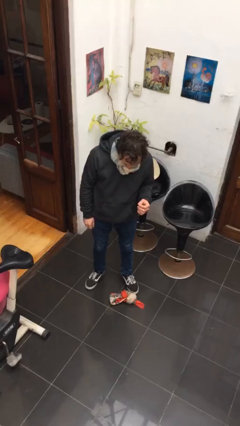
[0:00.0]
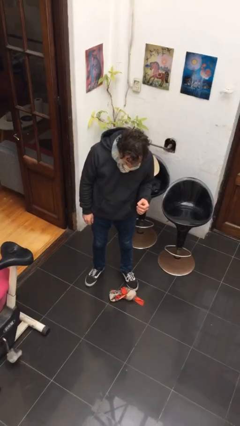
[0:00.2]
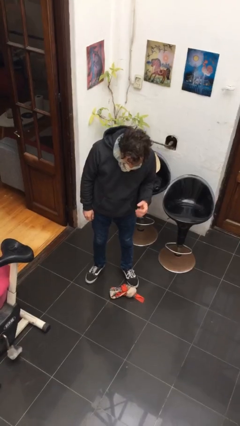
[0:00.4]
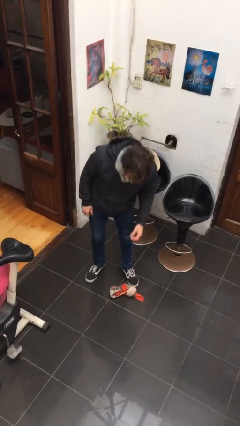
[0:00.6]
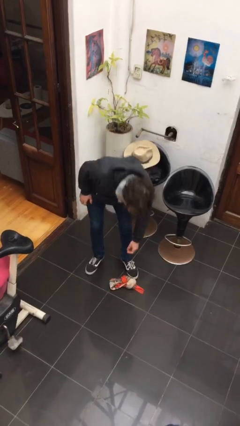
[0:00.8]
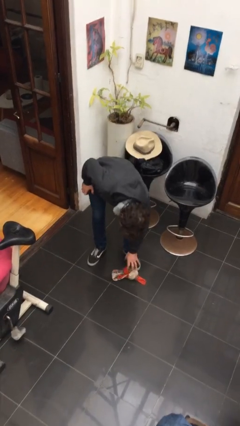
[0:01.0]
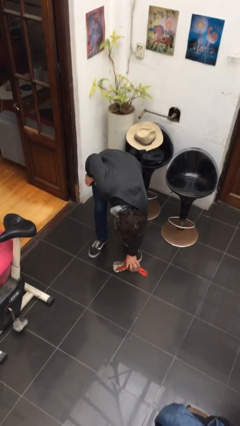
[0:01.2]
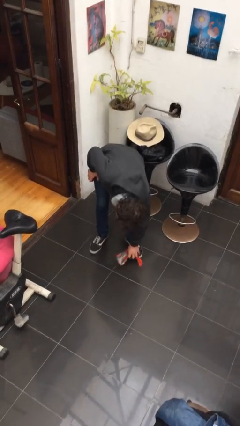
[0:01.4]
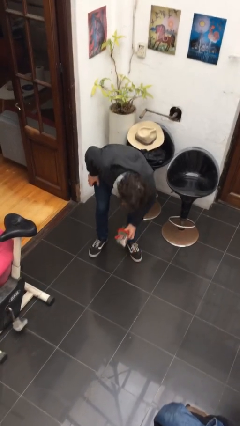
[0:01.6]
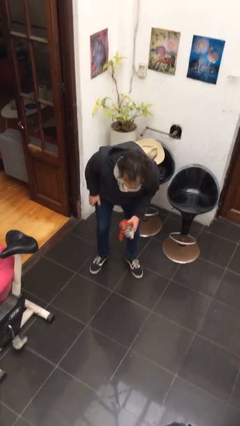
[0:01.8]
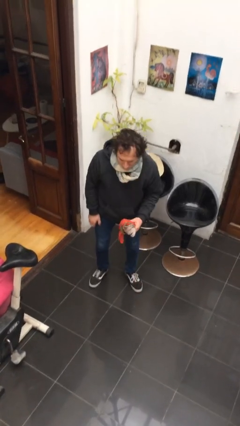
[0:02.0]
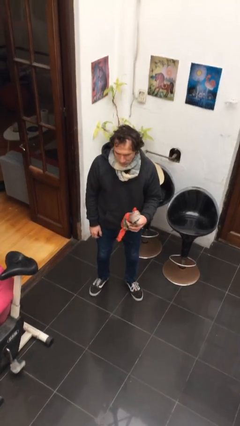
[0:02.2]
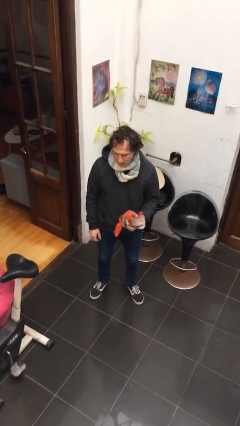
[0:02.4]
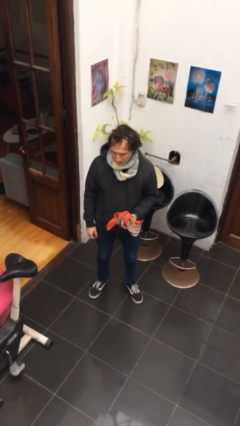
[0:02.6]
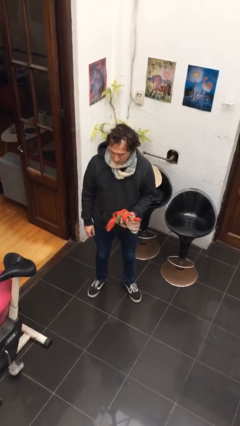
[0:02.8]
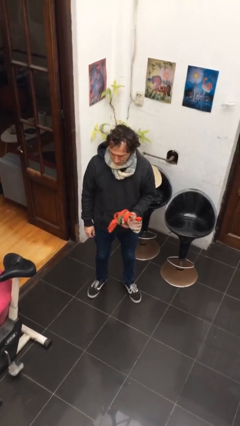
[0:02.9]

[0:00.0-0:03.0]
person picks up object from floor

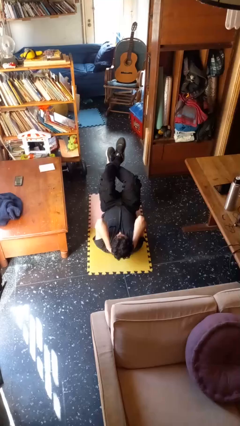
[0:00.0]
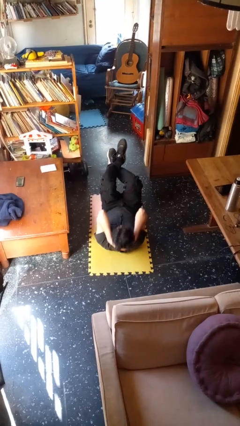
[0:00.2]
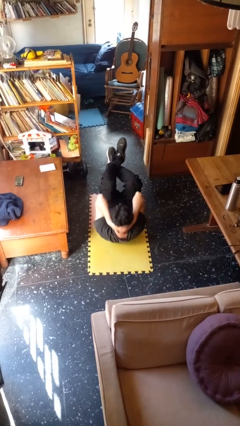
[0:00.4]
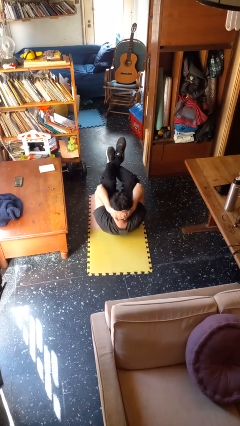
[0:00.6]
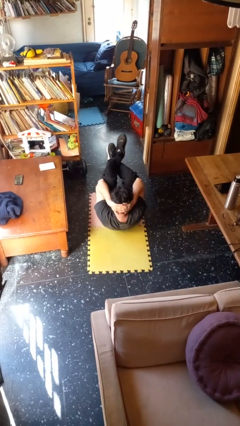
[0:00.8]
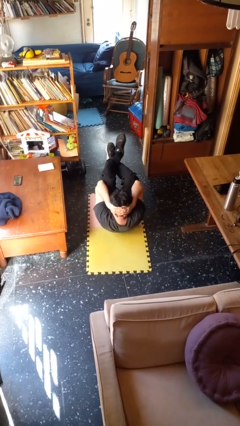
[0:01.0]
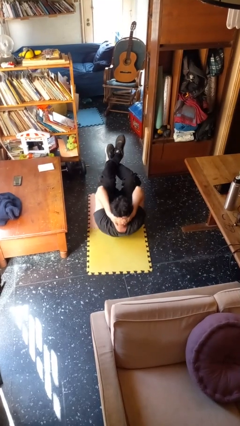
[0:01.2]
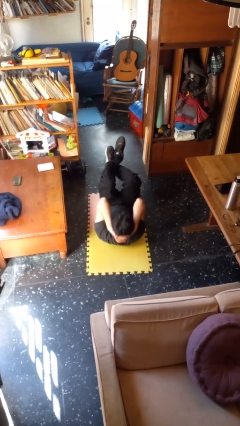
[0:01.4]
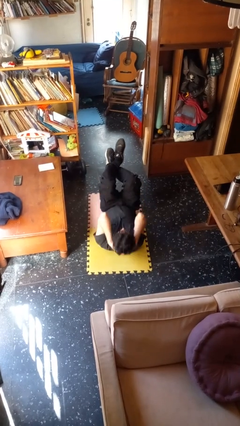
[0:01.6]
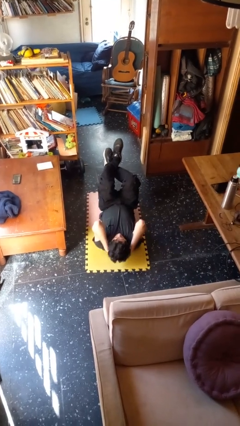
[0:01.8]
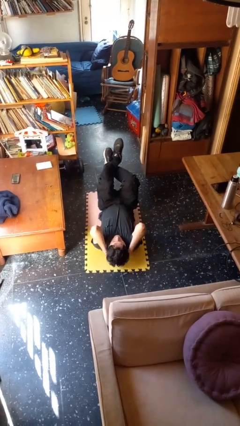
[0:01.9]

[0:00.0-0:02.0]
person exercises with situp

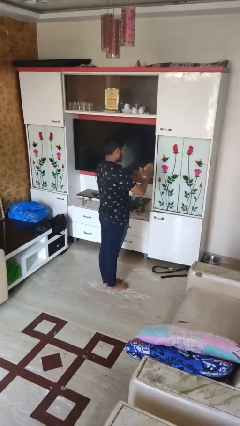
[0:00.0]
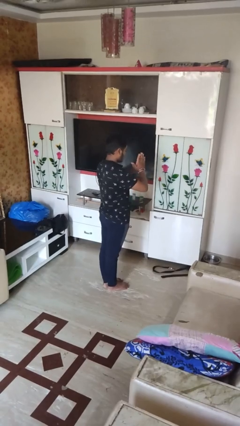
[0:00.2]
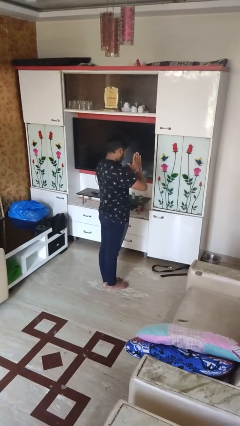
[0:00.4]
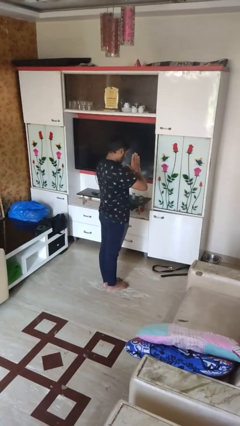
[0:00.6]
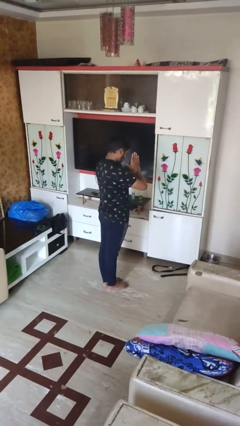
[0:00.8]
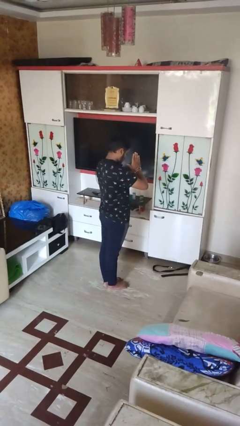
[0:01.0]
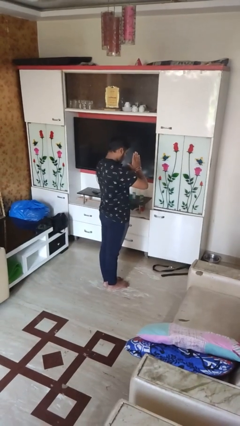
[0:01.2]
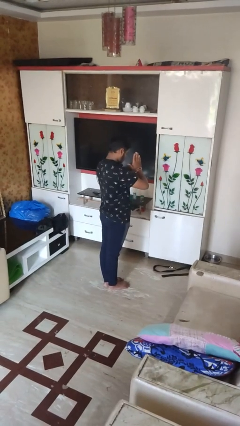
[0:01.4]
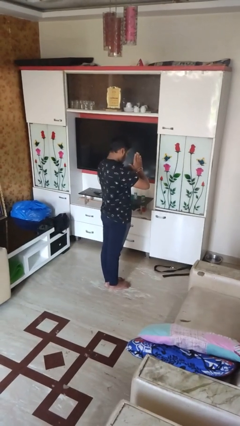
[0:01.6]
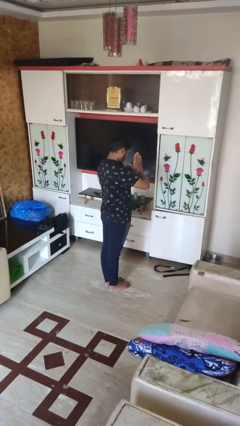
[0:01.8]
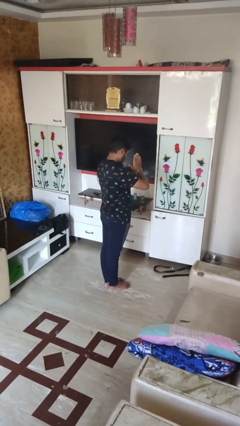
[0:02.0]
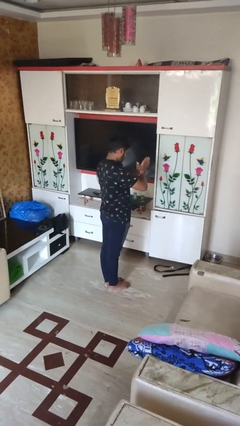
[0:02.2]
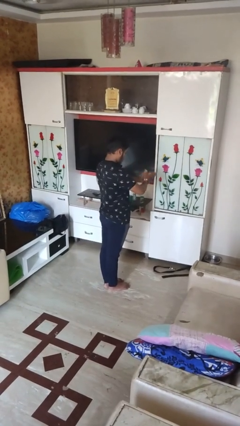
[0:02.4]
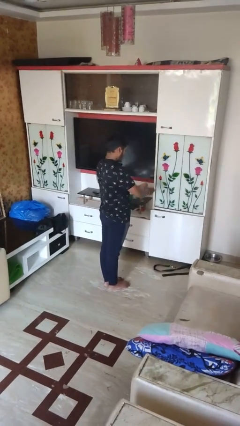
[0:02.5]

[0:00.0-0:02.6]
person prays

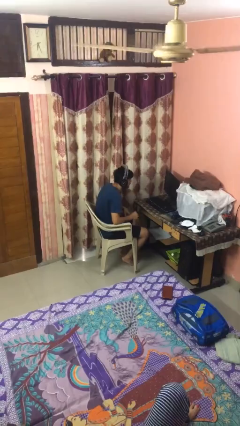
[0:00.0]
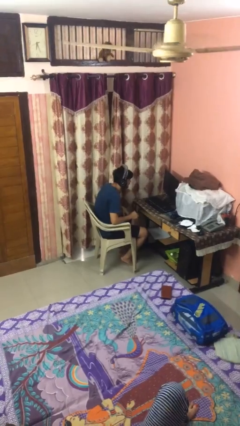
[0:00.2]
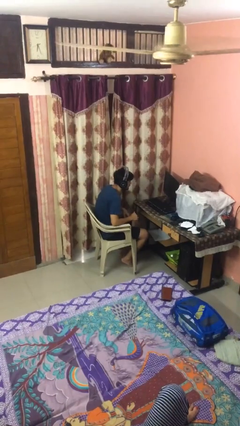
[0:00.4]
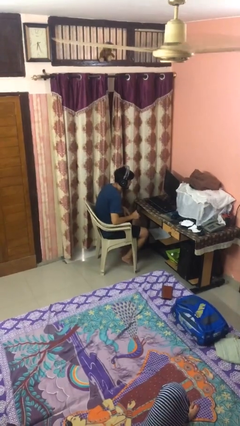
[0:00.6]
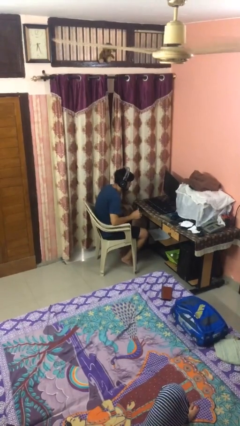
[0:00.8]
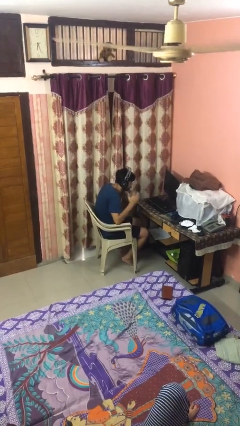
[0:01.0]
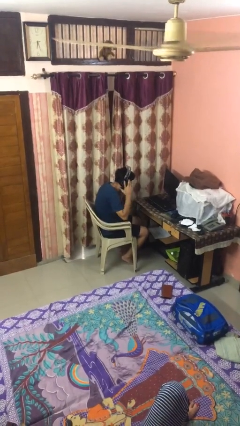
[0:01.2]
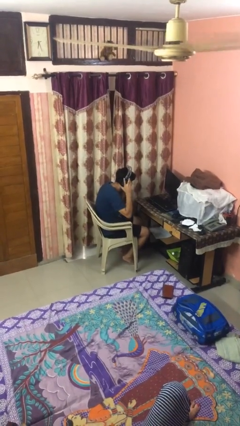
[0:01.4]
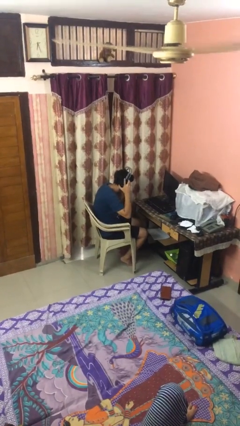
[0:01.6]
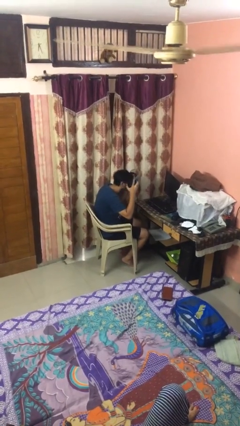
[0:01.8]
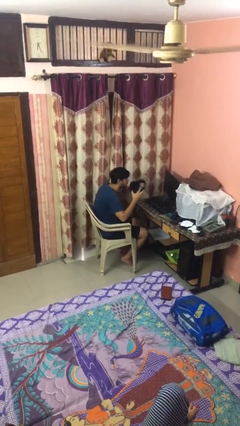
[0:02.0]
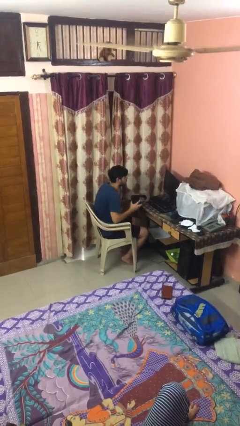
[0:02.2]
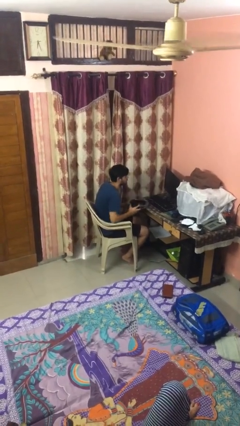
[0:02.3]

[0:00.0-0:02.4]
person takes off headphones

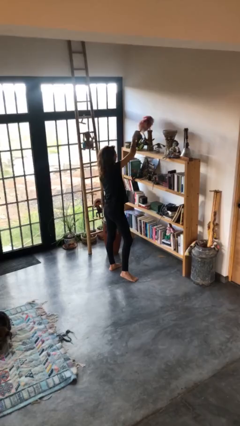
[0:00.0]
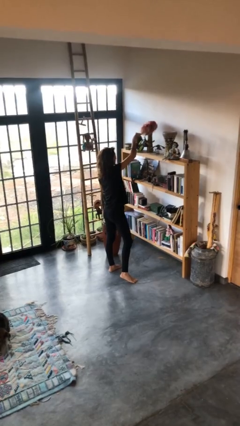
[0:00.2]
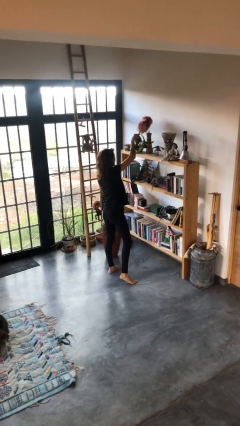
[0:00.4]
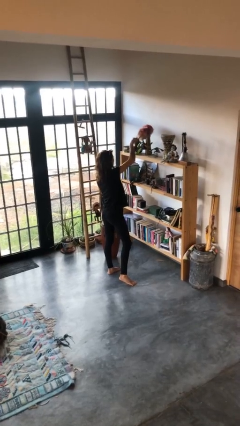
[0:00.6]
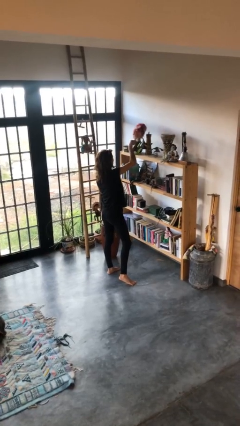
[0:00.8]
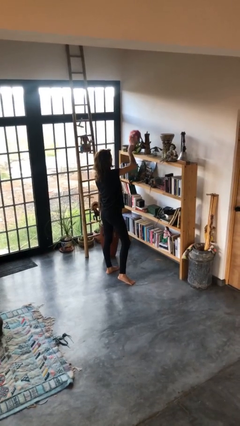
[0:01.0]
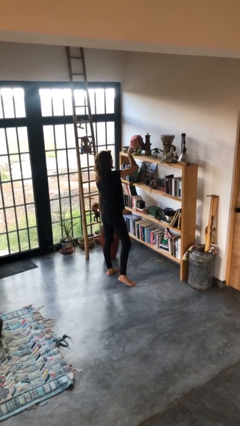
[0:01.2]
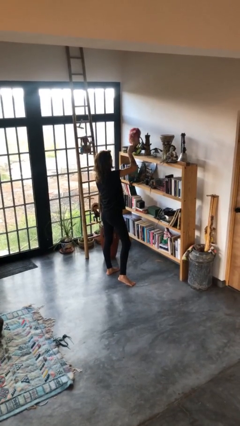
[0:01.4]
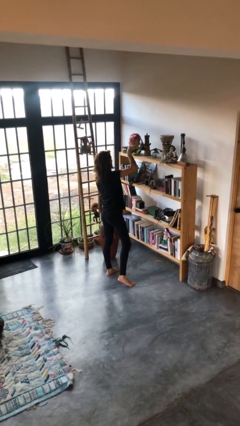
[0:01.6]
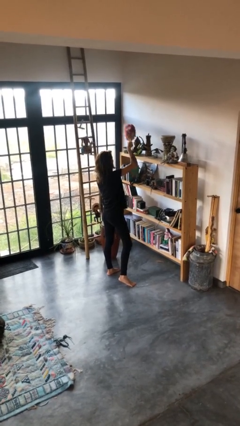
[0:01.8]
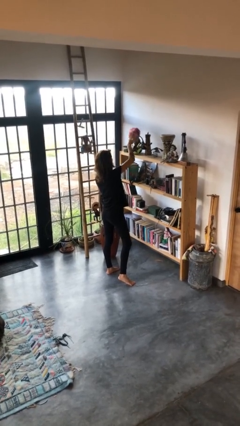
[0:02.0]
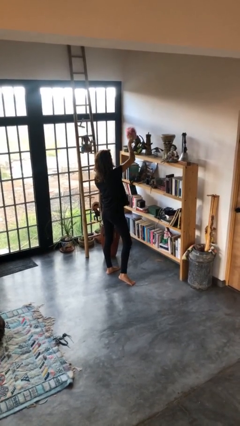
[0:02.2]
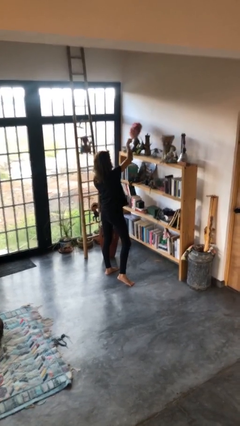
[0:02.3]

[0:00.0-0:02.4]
person dusts furniture

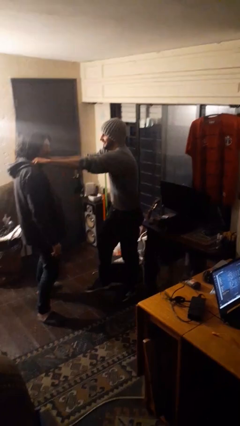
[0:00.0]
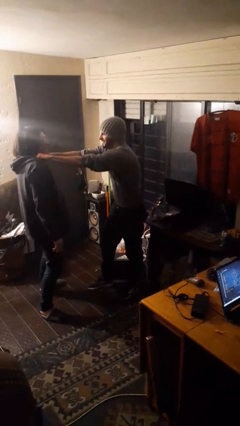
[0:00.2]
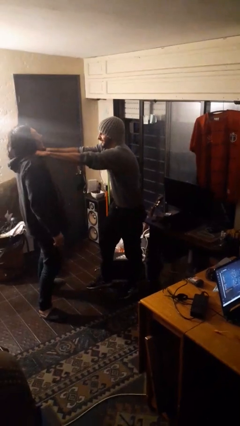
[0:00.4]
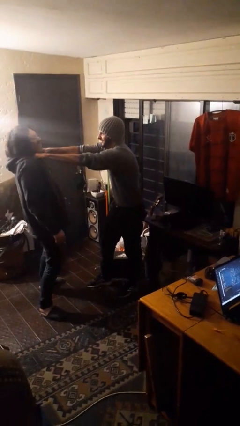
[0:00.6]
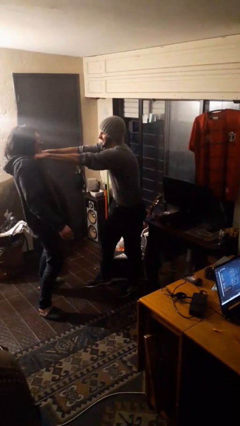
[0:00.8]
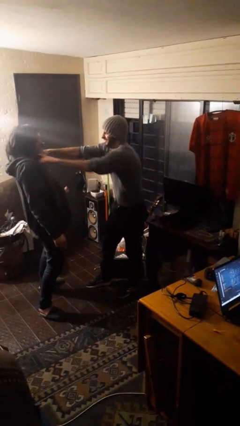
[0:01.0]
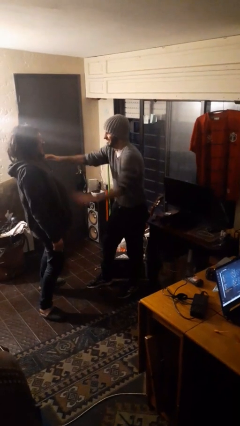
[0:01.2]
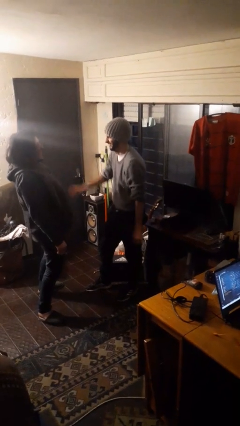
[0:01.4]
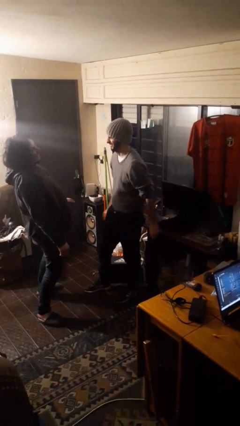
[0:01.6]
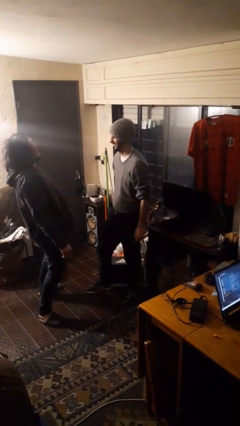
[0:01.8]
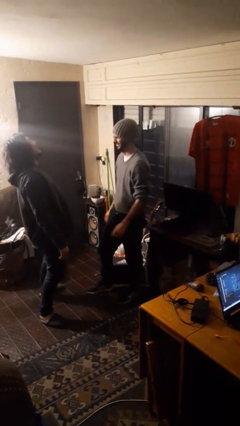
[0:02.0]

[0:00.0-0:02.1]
person tickles person

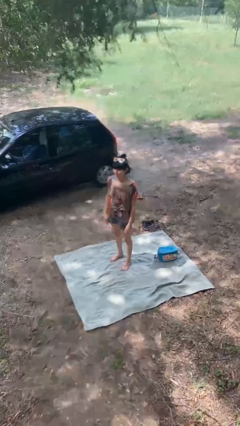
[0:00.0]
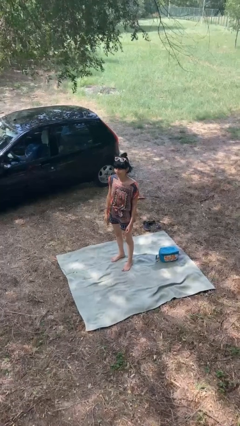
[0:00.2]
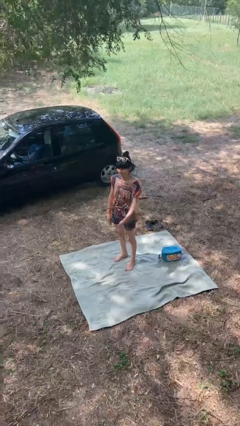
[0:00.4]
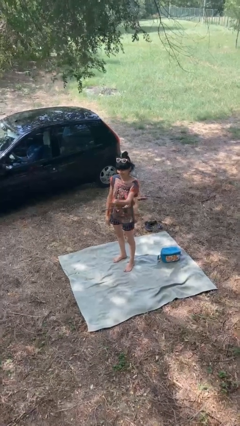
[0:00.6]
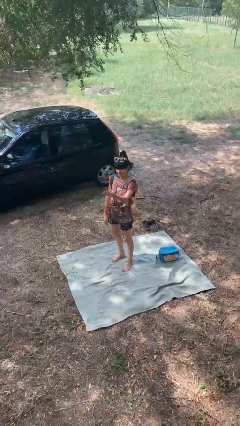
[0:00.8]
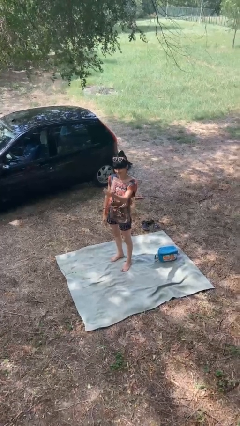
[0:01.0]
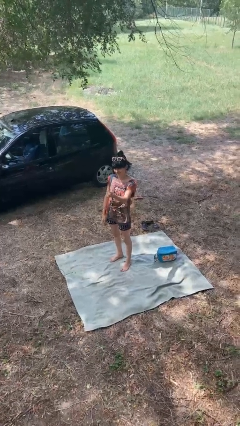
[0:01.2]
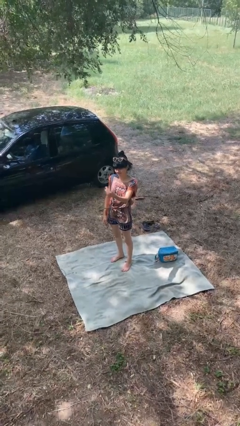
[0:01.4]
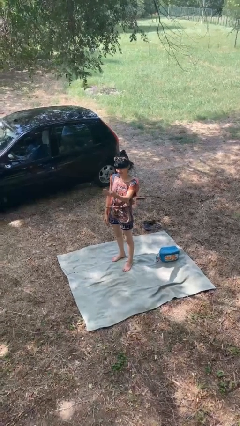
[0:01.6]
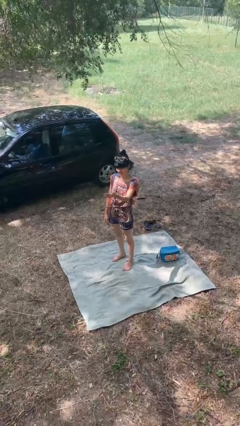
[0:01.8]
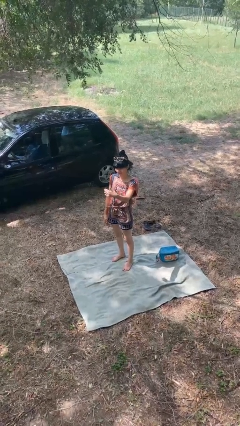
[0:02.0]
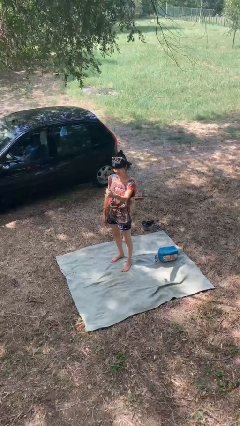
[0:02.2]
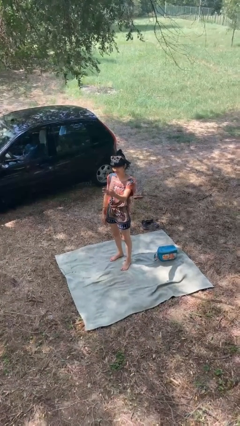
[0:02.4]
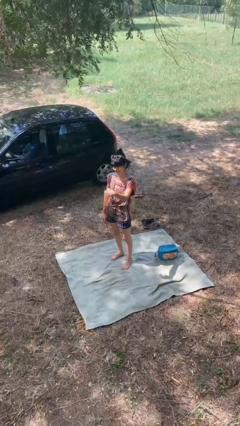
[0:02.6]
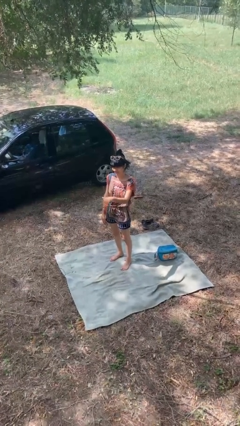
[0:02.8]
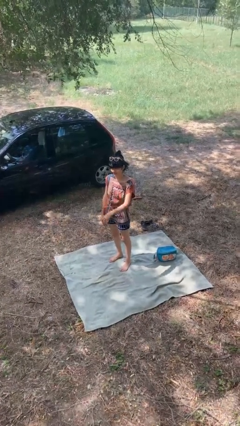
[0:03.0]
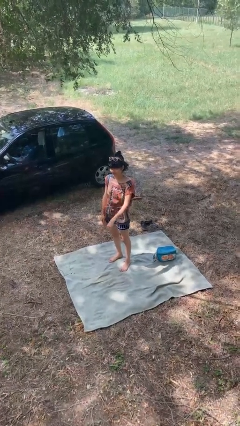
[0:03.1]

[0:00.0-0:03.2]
person gestures come here
